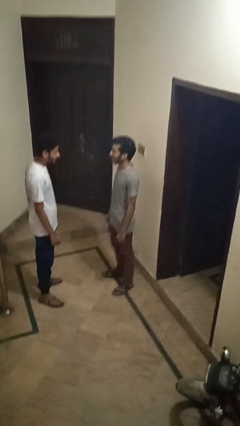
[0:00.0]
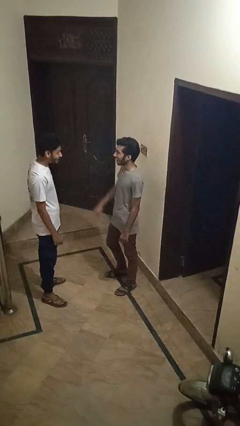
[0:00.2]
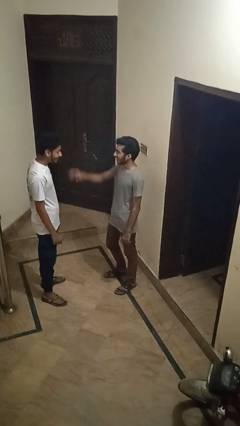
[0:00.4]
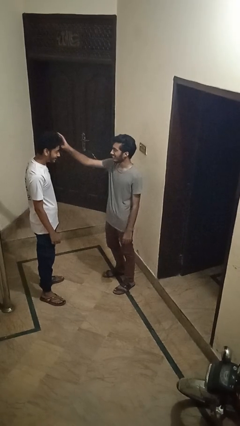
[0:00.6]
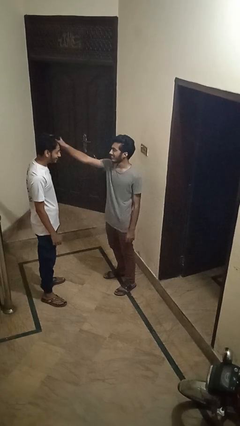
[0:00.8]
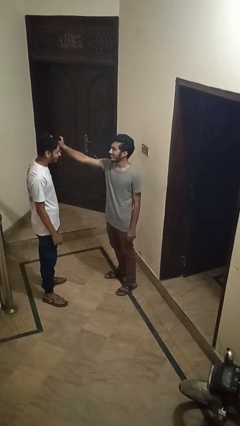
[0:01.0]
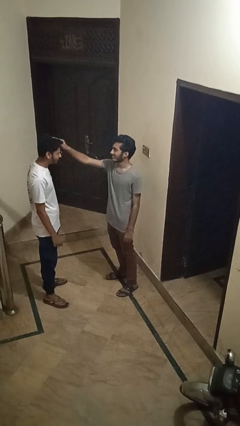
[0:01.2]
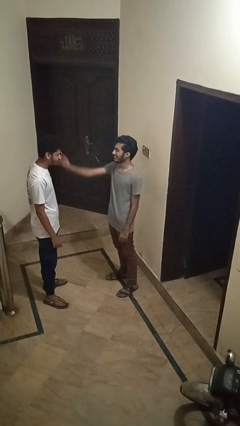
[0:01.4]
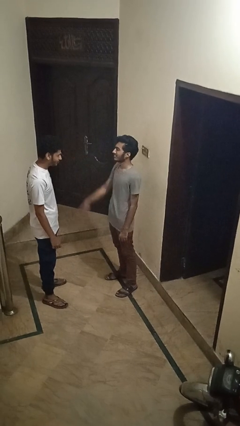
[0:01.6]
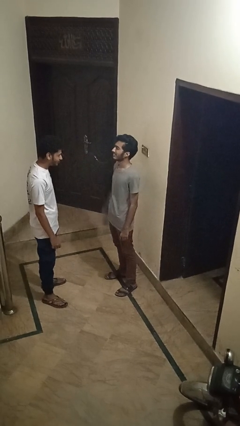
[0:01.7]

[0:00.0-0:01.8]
person grabs person by hair

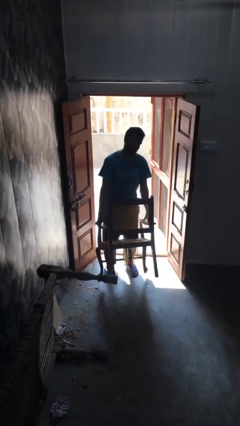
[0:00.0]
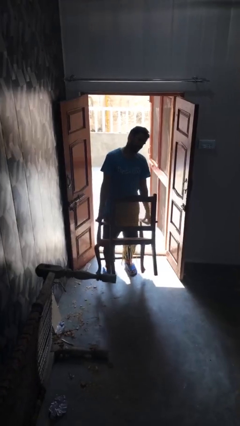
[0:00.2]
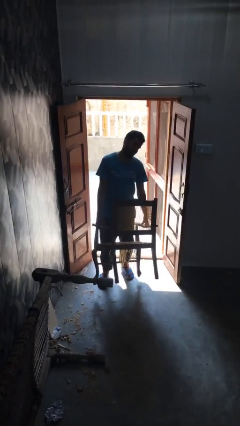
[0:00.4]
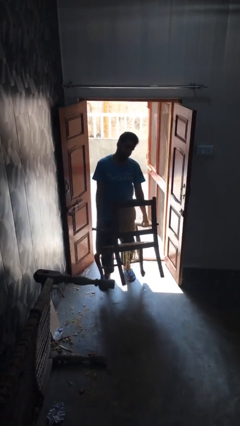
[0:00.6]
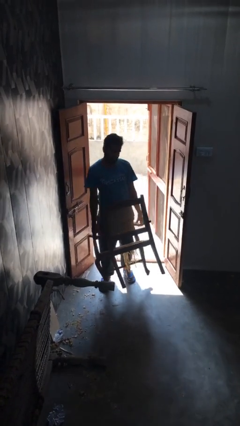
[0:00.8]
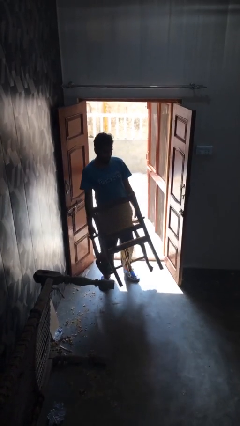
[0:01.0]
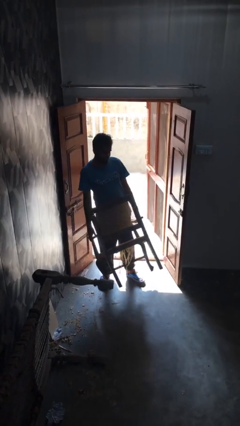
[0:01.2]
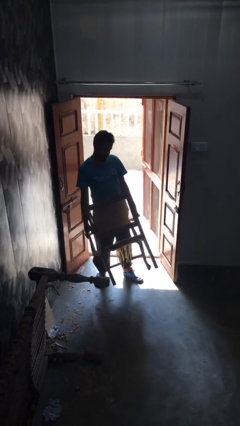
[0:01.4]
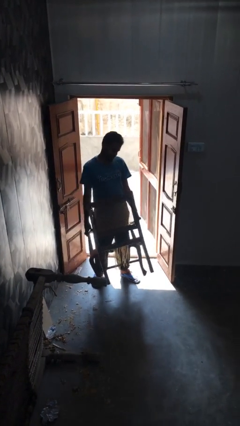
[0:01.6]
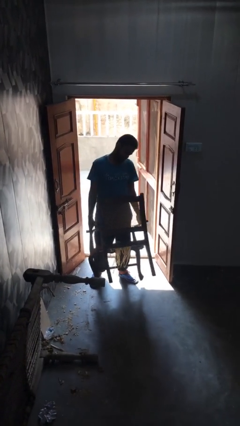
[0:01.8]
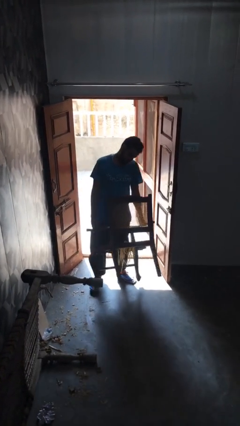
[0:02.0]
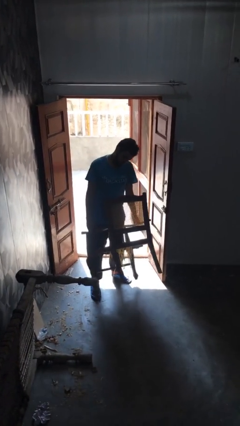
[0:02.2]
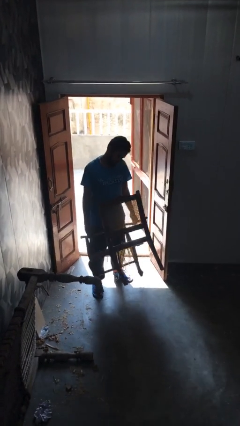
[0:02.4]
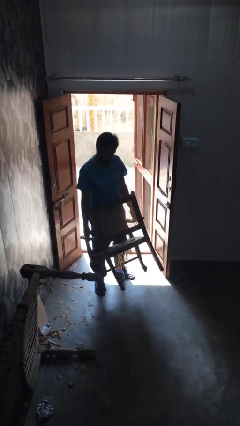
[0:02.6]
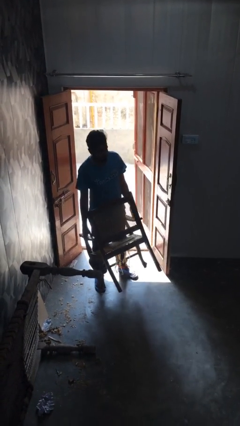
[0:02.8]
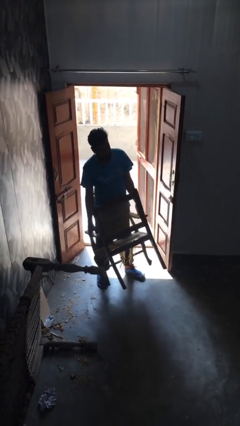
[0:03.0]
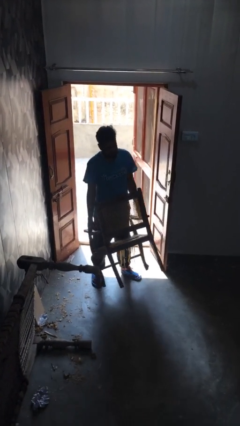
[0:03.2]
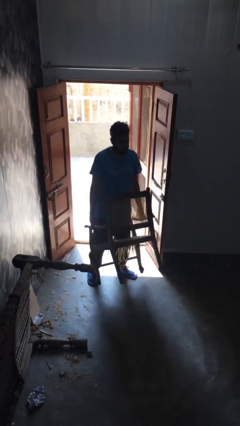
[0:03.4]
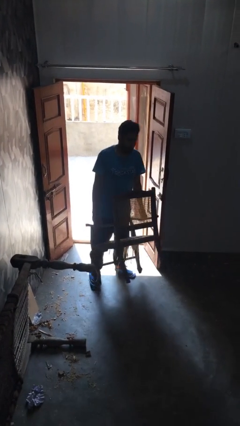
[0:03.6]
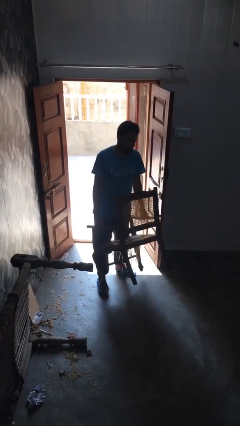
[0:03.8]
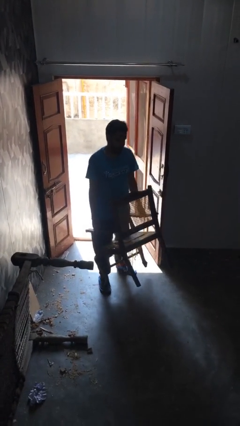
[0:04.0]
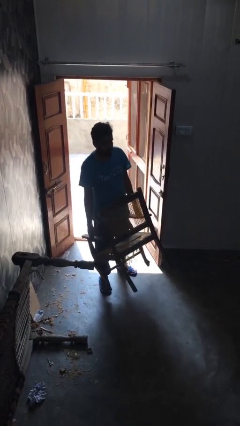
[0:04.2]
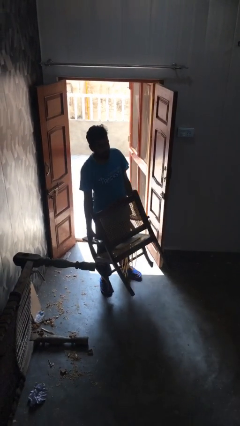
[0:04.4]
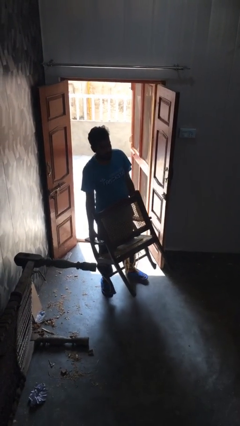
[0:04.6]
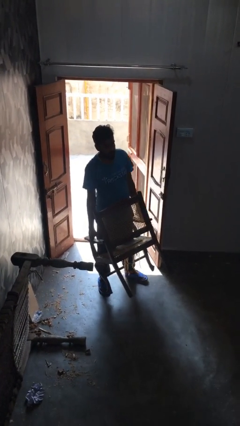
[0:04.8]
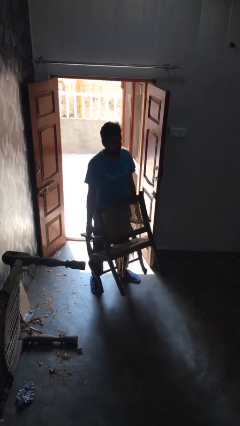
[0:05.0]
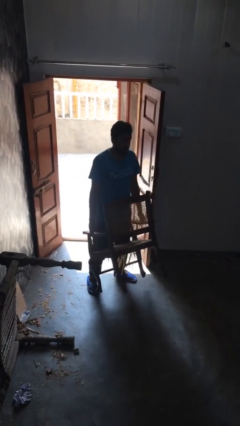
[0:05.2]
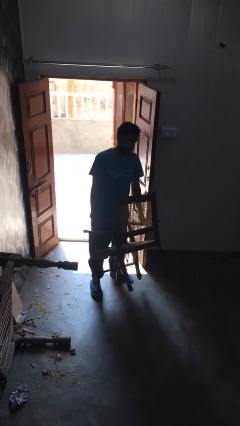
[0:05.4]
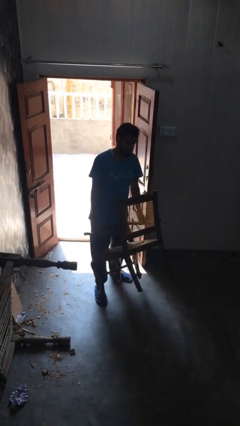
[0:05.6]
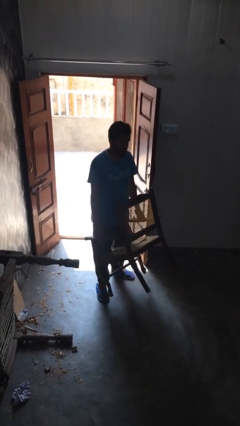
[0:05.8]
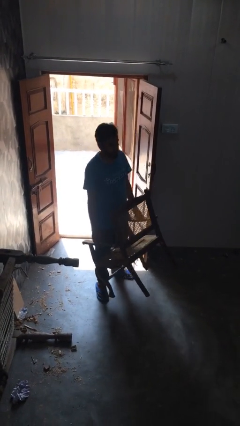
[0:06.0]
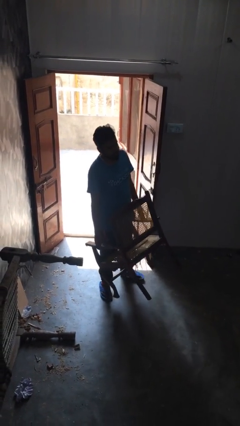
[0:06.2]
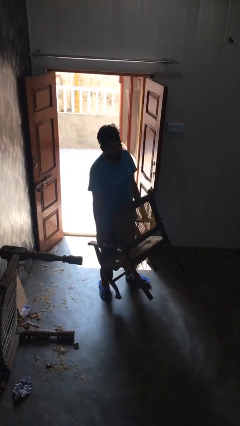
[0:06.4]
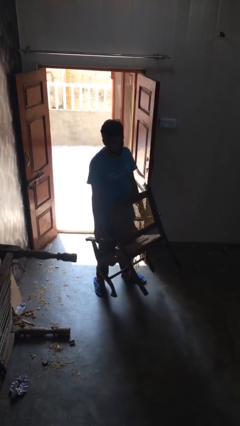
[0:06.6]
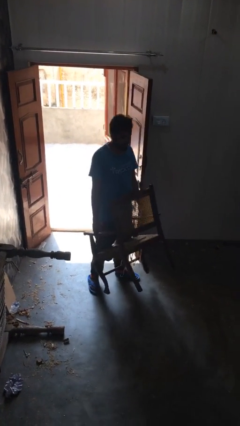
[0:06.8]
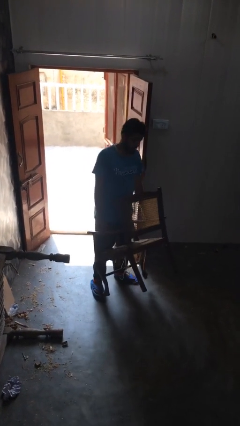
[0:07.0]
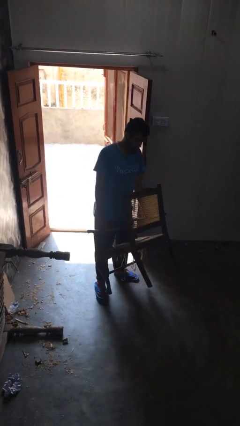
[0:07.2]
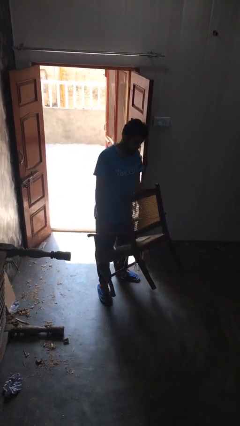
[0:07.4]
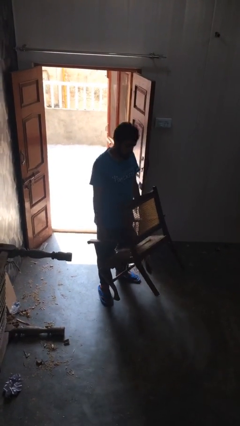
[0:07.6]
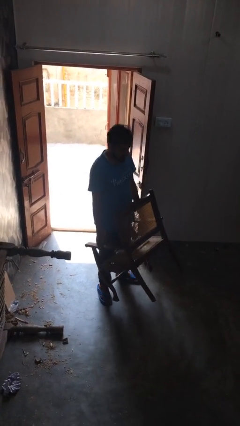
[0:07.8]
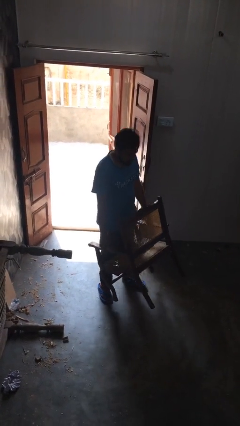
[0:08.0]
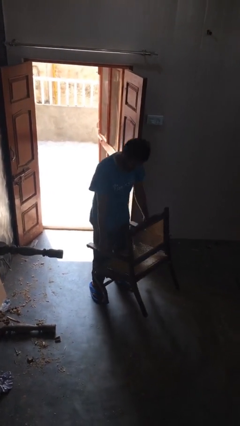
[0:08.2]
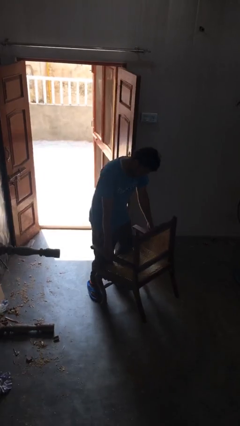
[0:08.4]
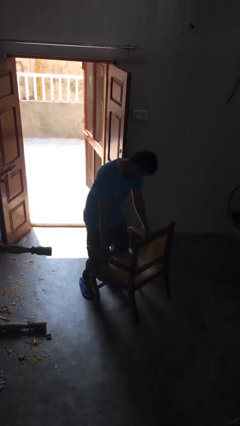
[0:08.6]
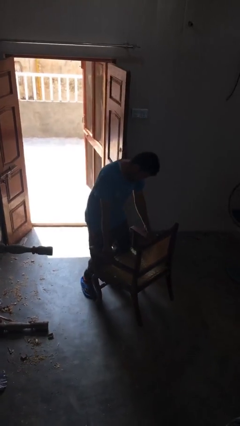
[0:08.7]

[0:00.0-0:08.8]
person carries heavy object

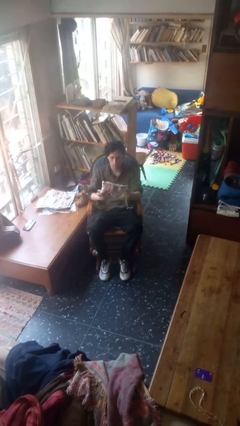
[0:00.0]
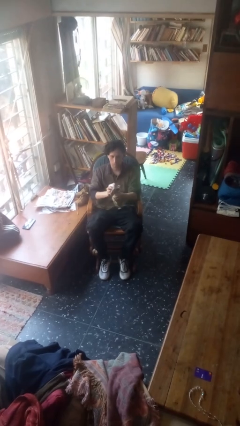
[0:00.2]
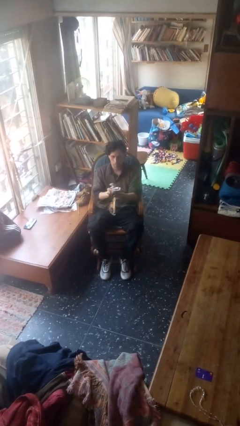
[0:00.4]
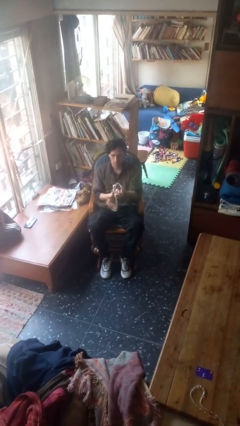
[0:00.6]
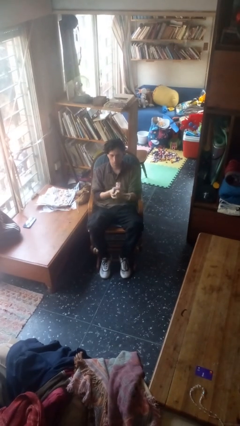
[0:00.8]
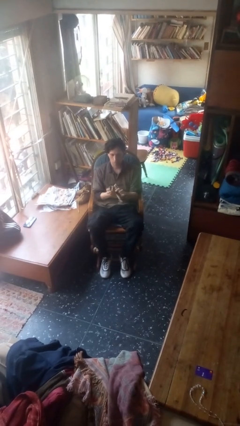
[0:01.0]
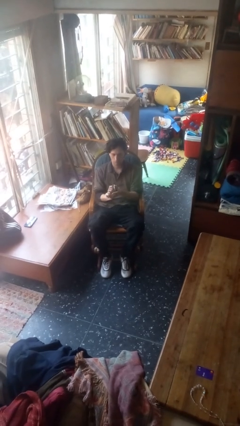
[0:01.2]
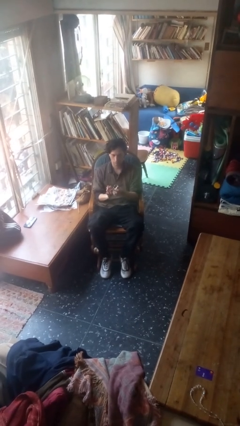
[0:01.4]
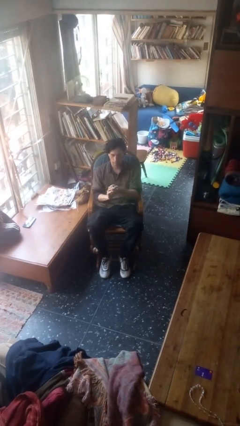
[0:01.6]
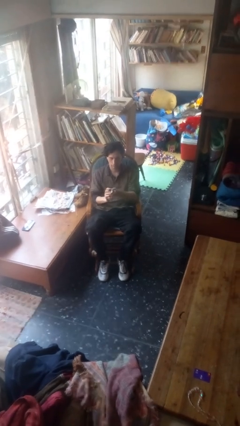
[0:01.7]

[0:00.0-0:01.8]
person crumples paper

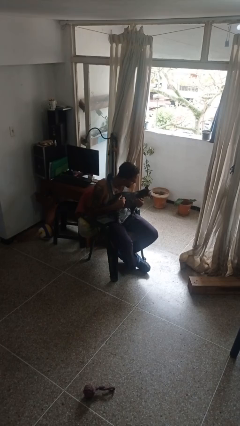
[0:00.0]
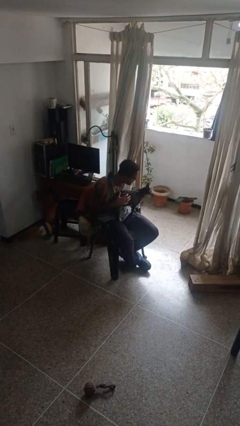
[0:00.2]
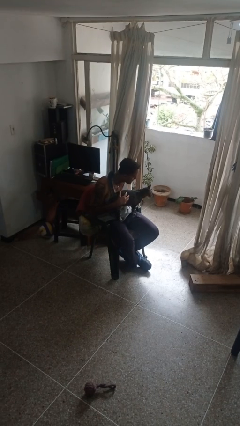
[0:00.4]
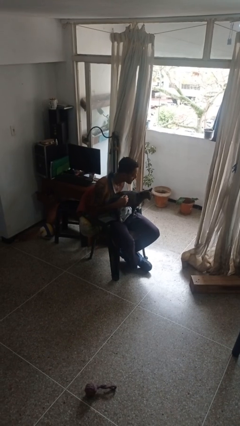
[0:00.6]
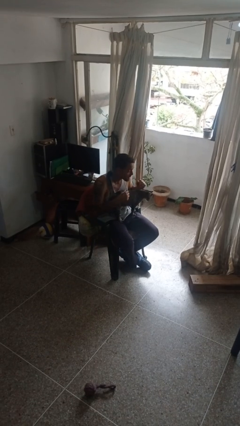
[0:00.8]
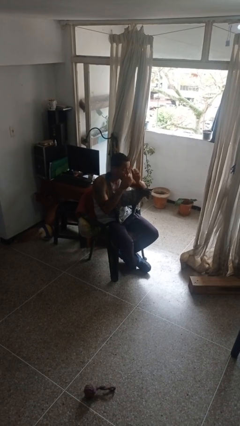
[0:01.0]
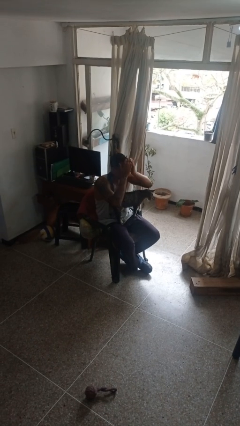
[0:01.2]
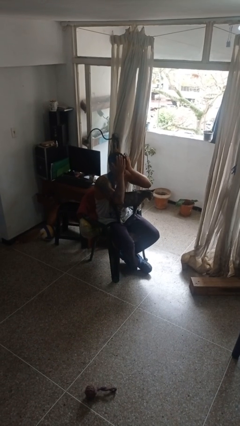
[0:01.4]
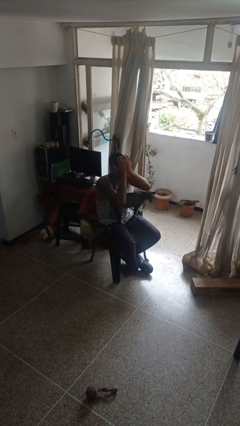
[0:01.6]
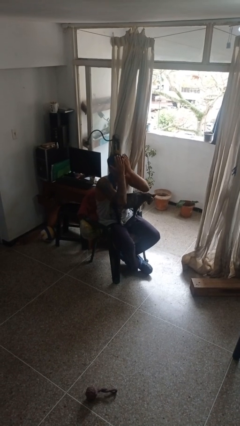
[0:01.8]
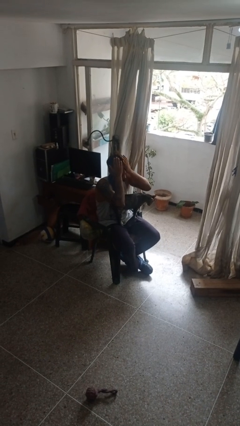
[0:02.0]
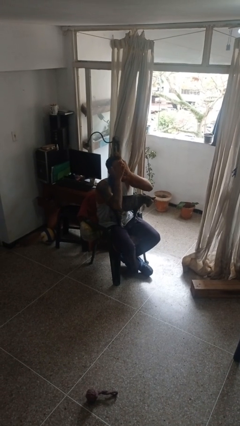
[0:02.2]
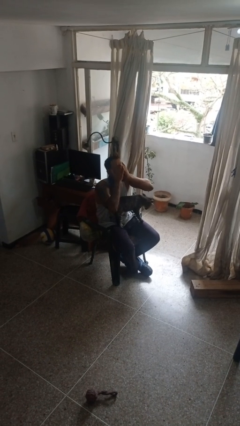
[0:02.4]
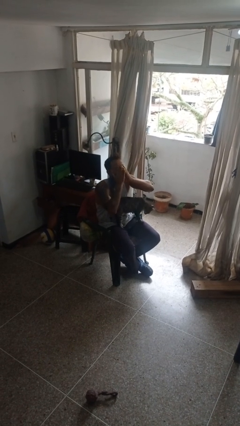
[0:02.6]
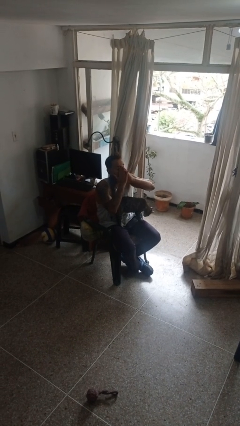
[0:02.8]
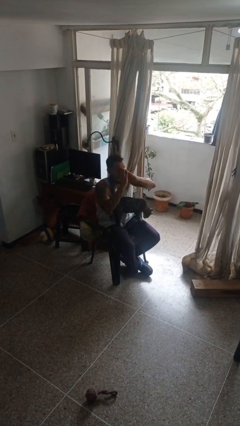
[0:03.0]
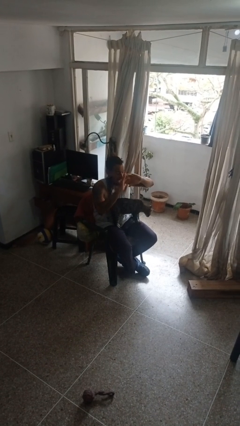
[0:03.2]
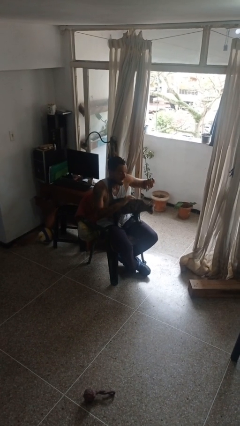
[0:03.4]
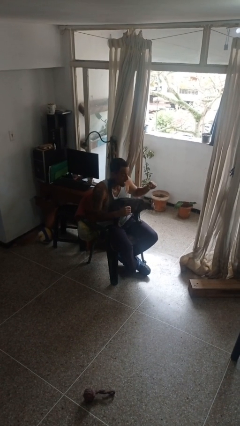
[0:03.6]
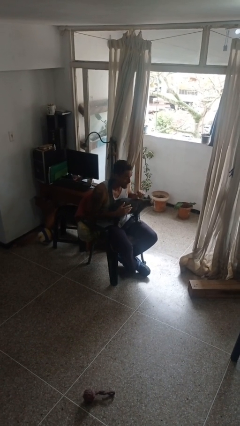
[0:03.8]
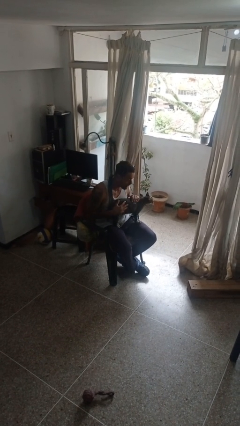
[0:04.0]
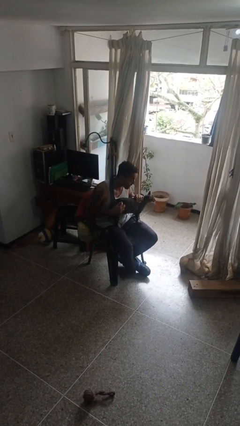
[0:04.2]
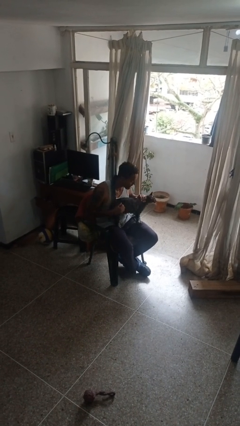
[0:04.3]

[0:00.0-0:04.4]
person rubs eyes

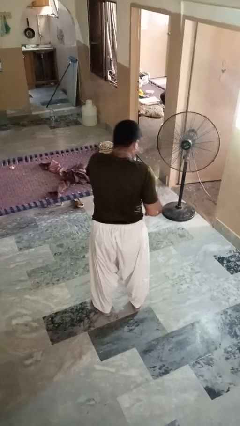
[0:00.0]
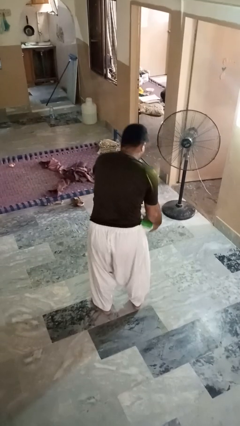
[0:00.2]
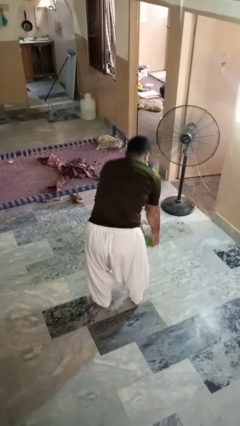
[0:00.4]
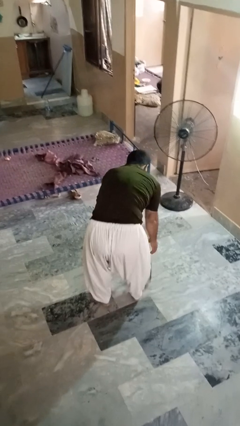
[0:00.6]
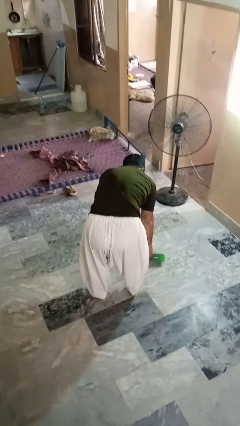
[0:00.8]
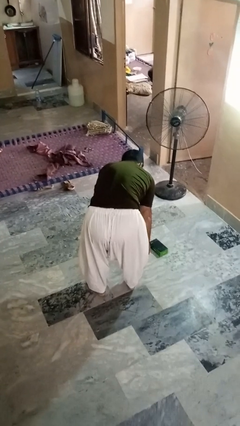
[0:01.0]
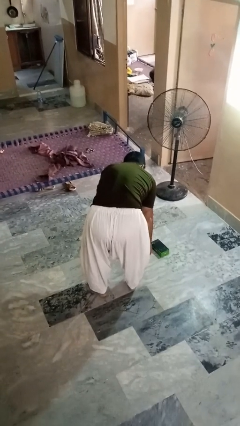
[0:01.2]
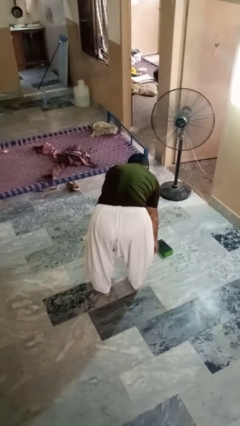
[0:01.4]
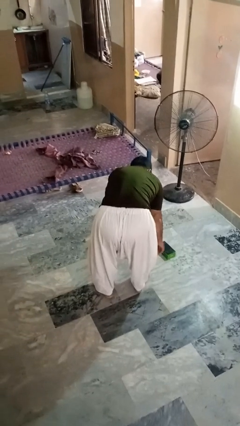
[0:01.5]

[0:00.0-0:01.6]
person catches dropped object
